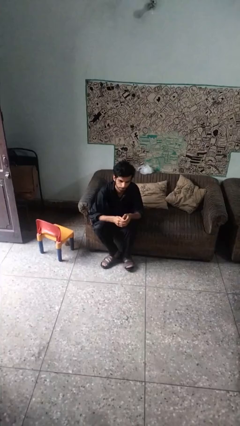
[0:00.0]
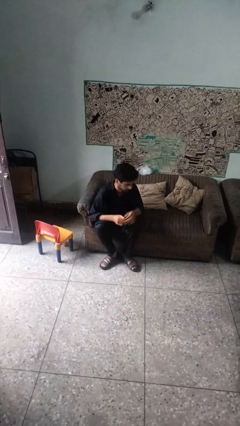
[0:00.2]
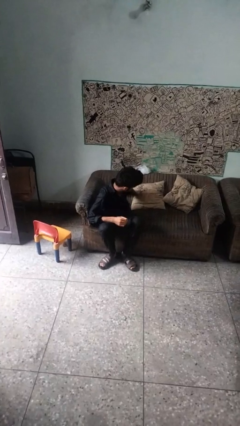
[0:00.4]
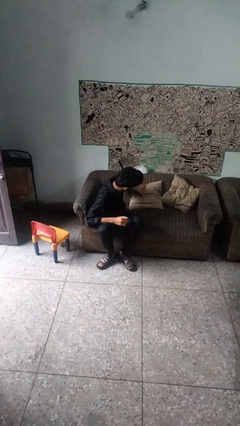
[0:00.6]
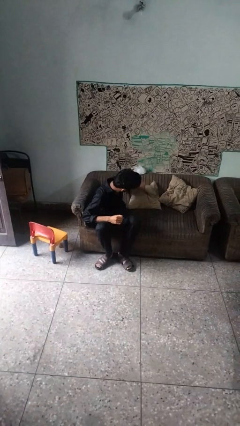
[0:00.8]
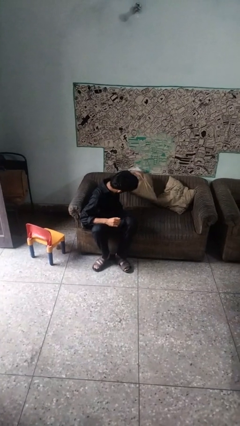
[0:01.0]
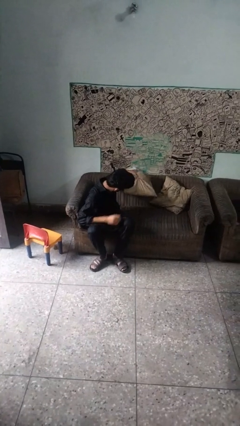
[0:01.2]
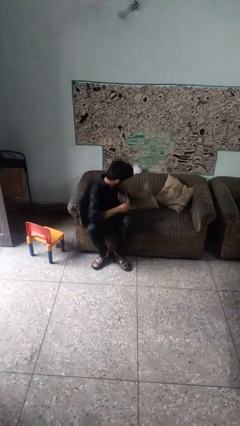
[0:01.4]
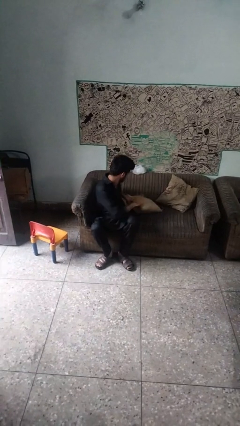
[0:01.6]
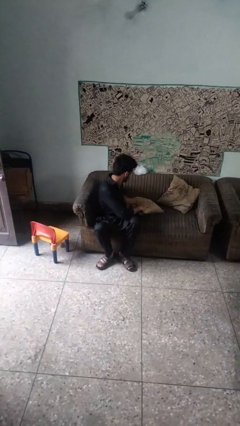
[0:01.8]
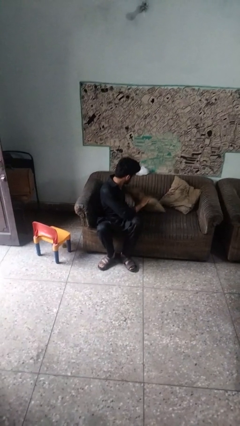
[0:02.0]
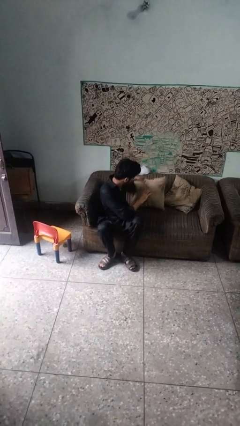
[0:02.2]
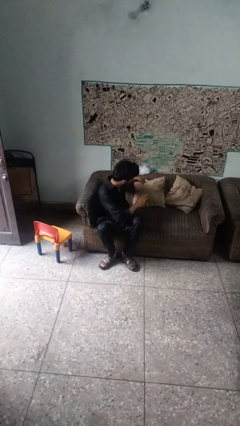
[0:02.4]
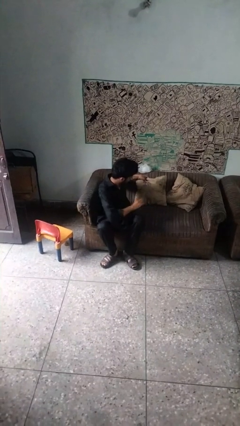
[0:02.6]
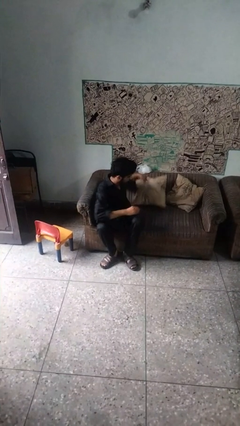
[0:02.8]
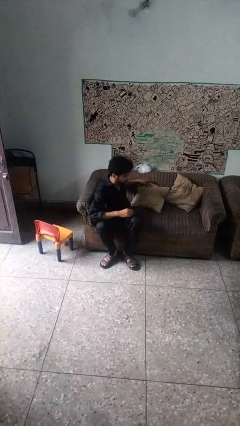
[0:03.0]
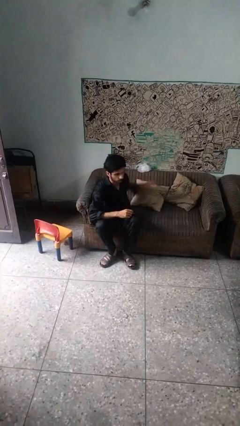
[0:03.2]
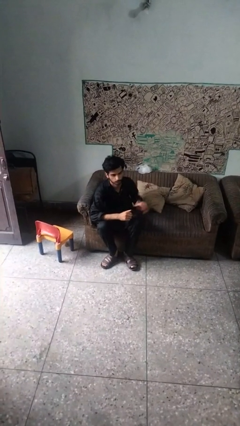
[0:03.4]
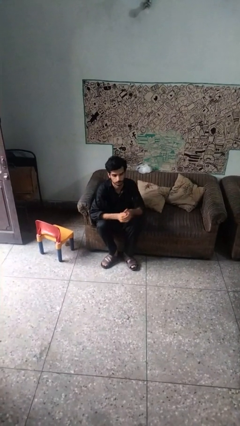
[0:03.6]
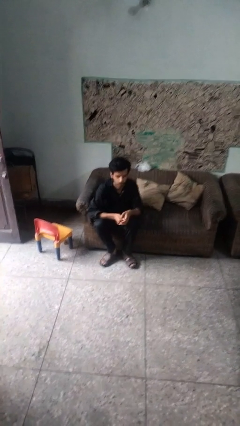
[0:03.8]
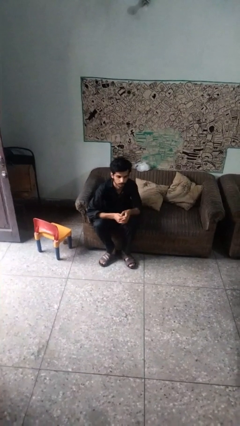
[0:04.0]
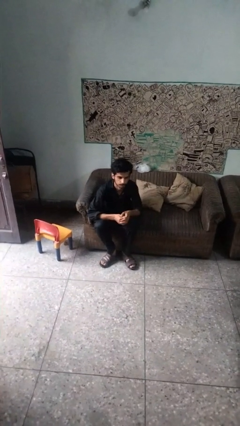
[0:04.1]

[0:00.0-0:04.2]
person searches in couch

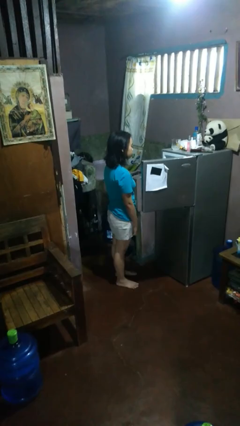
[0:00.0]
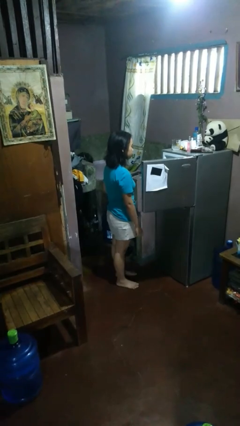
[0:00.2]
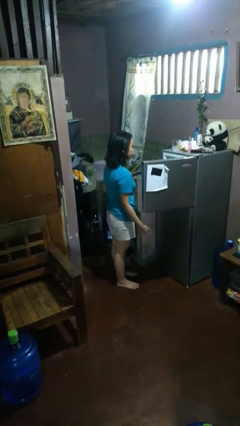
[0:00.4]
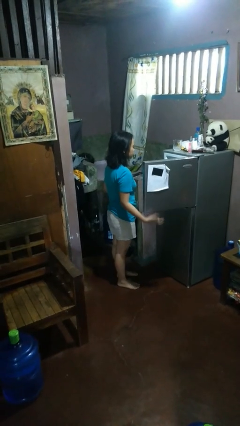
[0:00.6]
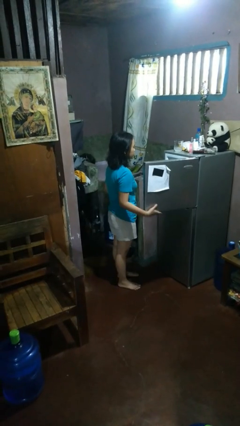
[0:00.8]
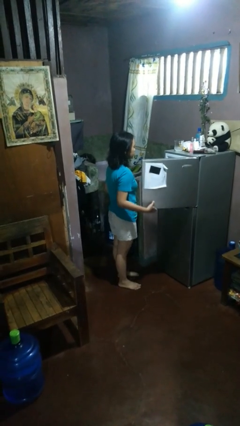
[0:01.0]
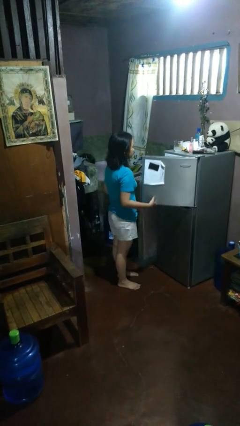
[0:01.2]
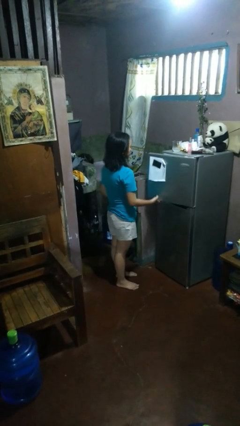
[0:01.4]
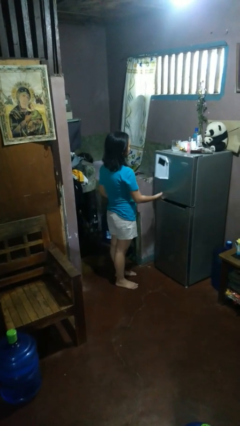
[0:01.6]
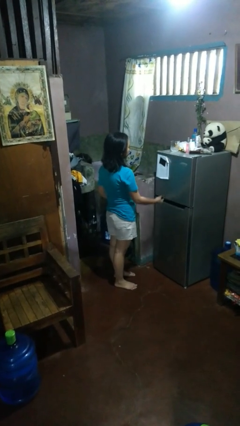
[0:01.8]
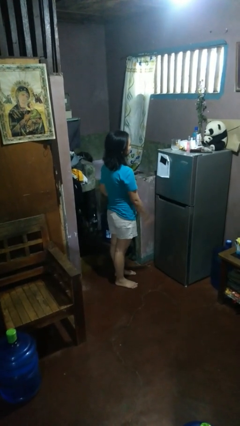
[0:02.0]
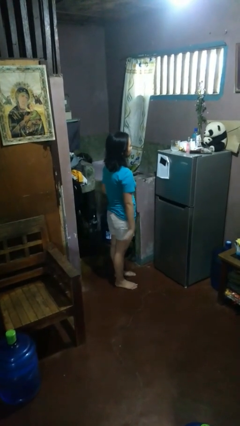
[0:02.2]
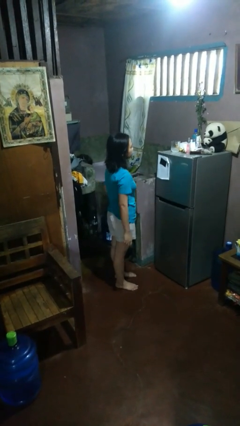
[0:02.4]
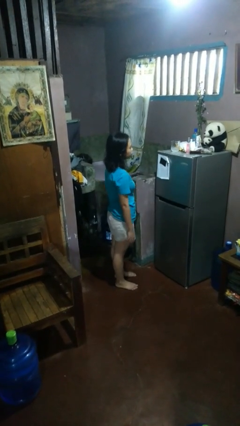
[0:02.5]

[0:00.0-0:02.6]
person closes refrigerator

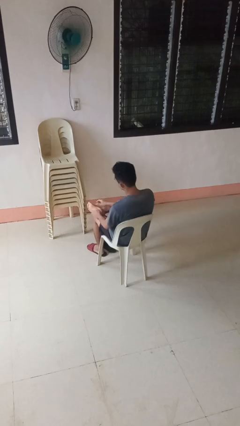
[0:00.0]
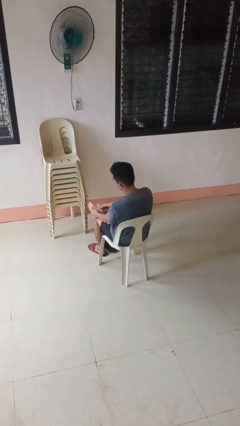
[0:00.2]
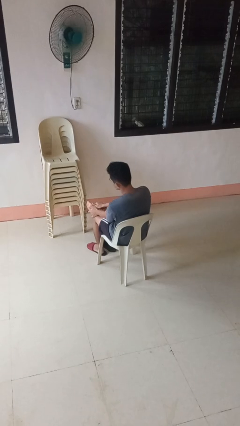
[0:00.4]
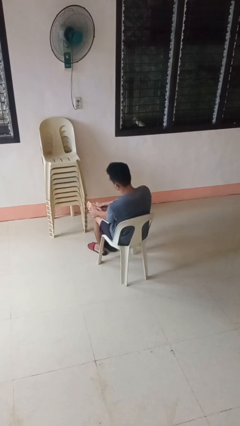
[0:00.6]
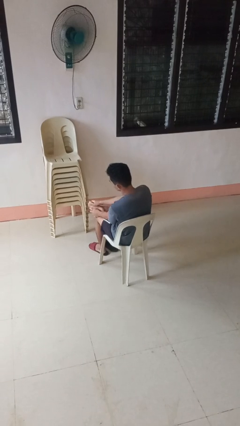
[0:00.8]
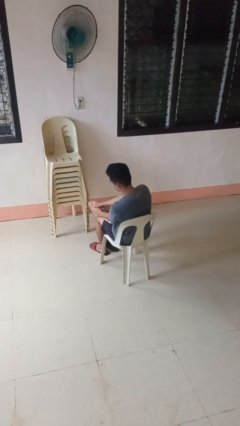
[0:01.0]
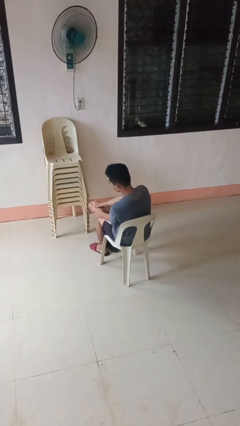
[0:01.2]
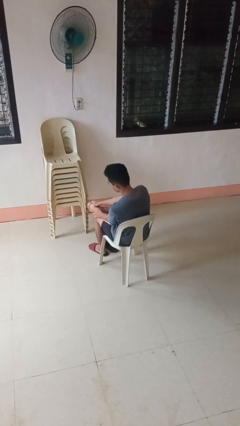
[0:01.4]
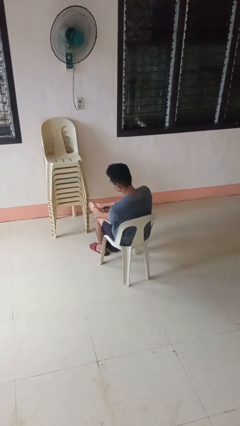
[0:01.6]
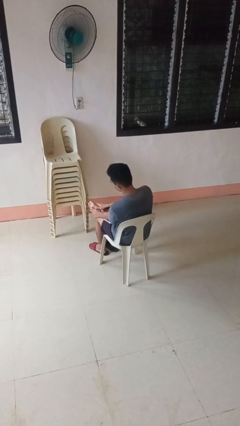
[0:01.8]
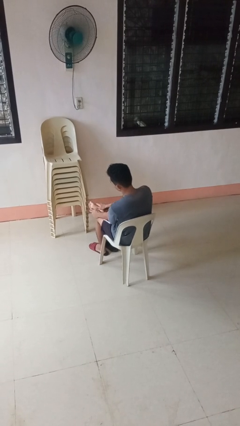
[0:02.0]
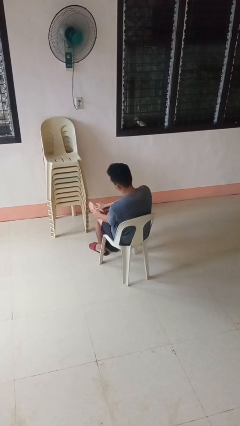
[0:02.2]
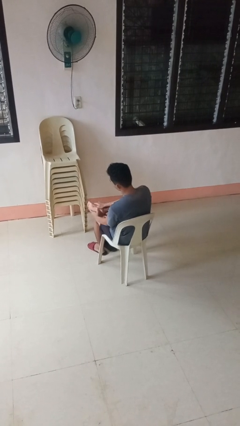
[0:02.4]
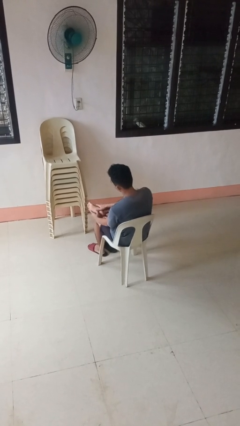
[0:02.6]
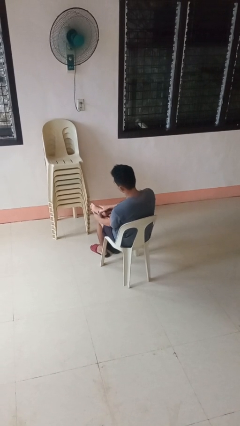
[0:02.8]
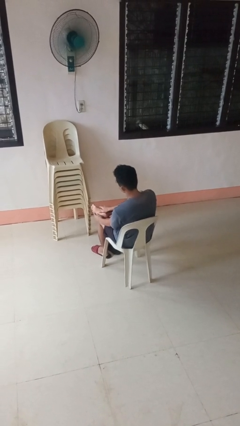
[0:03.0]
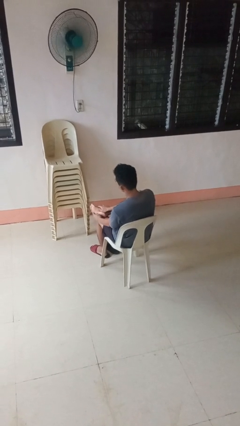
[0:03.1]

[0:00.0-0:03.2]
person rubs foot

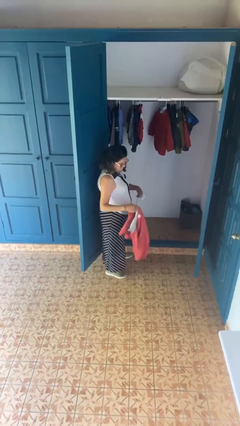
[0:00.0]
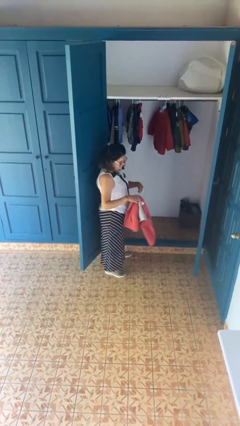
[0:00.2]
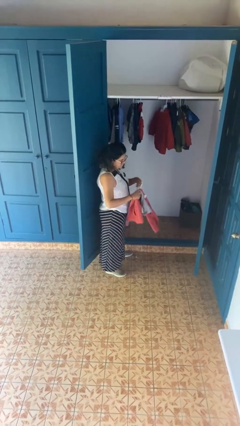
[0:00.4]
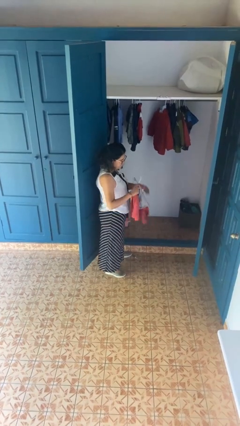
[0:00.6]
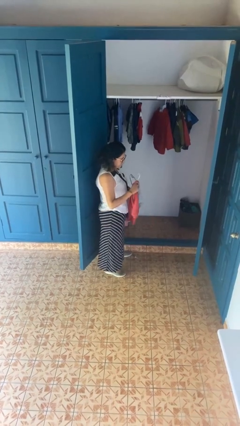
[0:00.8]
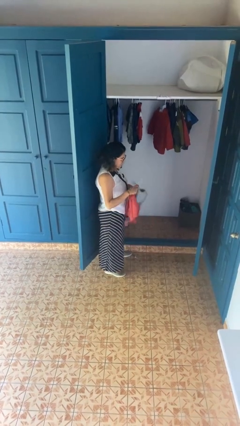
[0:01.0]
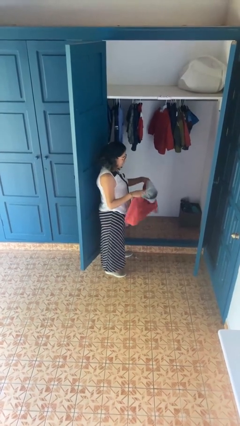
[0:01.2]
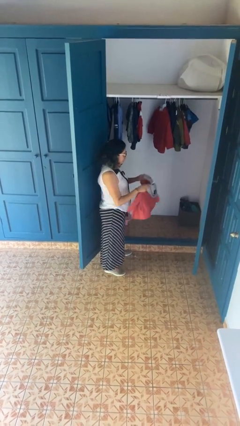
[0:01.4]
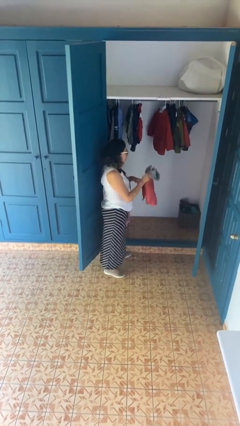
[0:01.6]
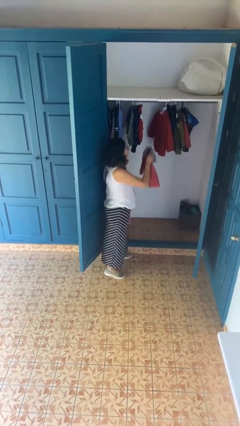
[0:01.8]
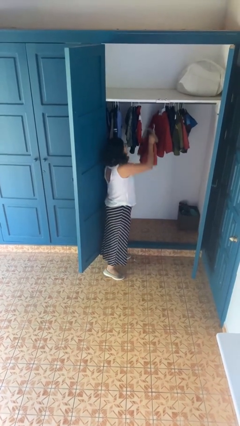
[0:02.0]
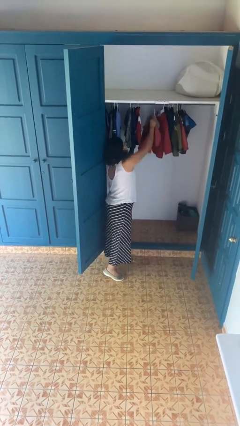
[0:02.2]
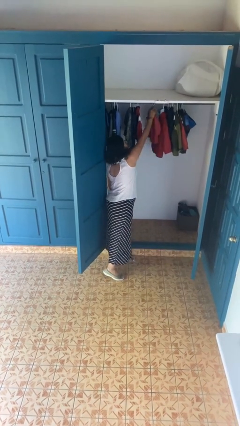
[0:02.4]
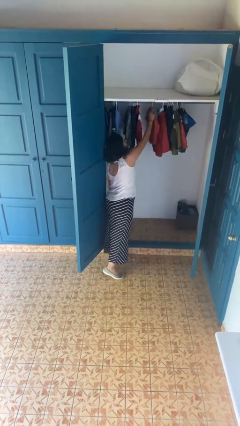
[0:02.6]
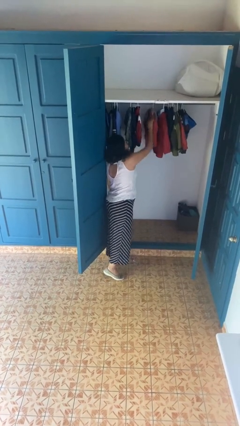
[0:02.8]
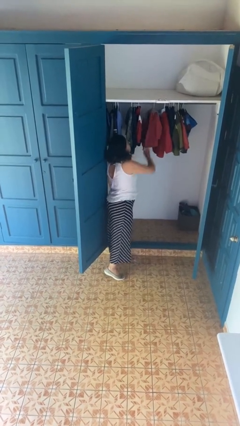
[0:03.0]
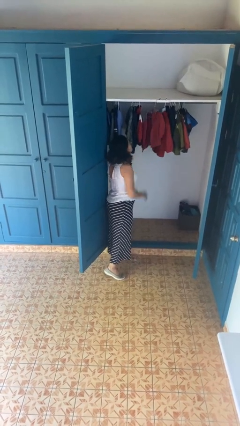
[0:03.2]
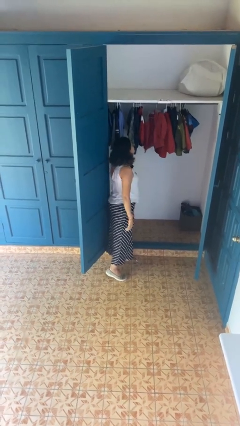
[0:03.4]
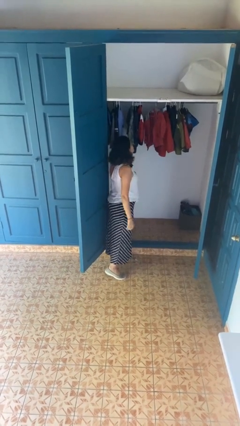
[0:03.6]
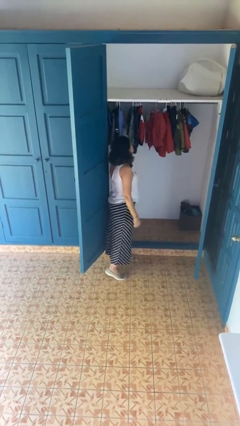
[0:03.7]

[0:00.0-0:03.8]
person puts clothes into closet

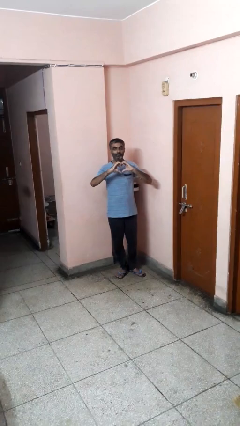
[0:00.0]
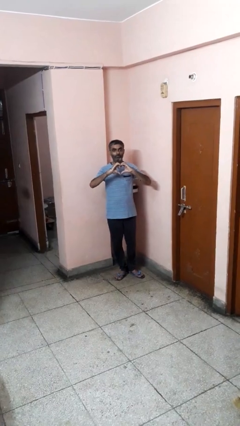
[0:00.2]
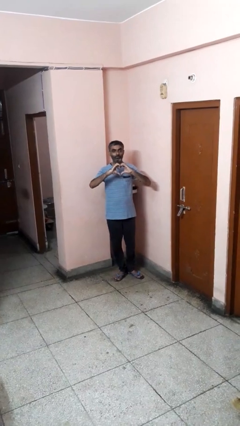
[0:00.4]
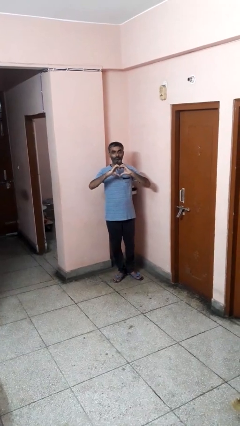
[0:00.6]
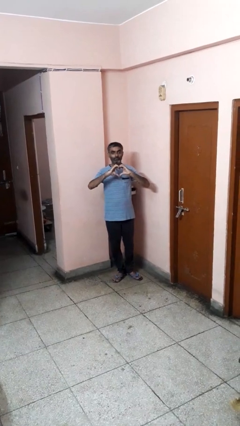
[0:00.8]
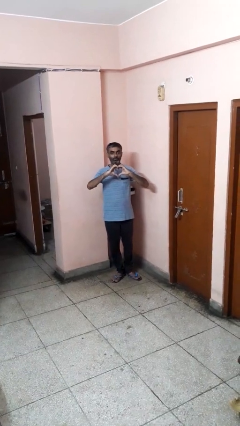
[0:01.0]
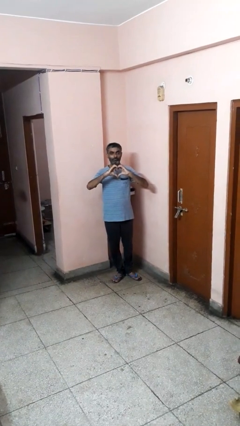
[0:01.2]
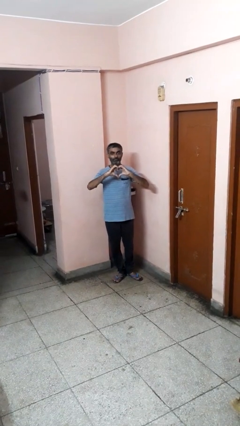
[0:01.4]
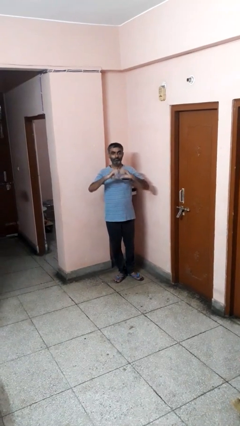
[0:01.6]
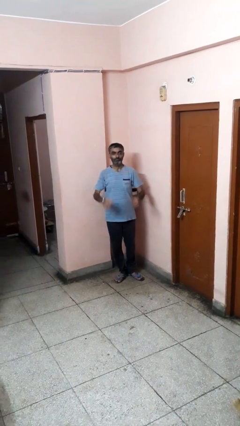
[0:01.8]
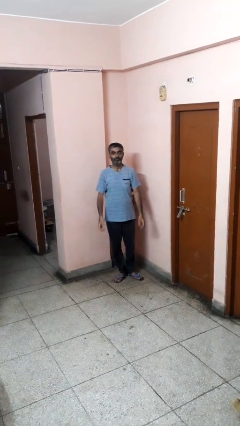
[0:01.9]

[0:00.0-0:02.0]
person gestures heart

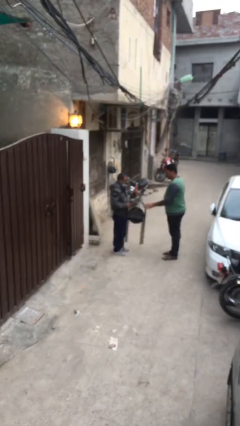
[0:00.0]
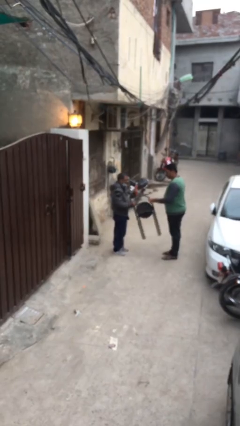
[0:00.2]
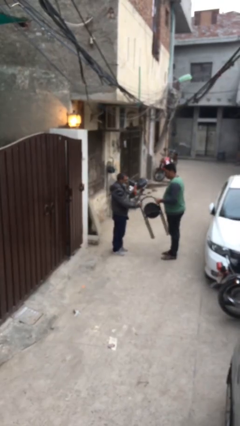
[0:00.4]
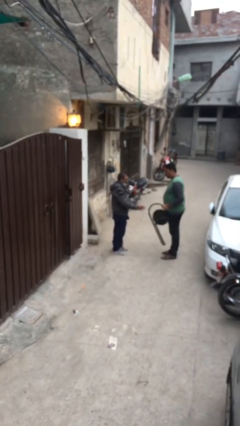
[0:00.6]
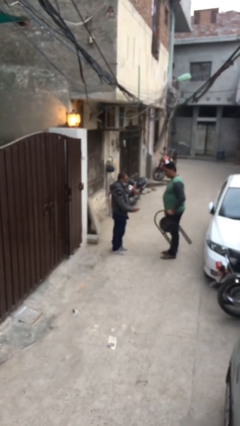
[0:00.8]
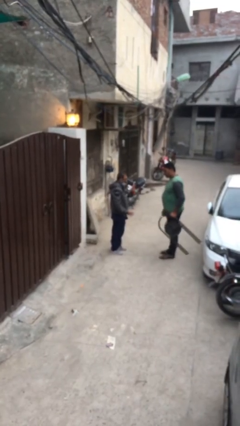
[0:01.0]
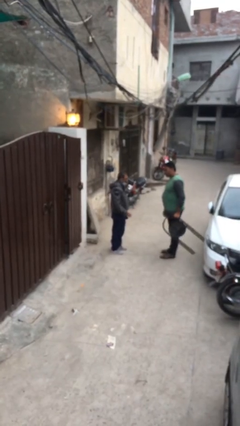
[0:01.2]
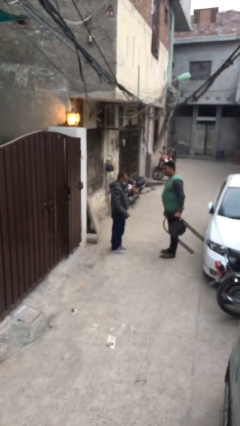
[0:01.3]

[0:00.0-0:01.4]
person transfers object to person

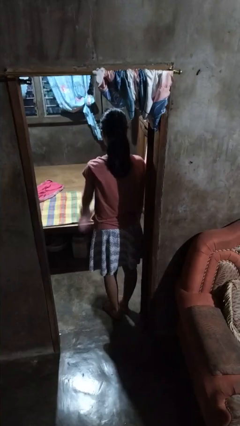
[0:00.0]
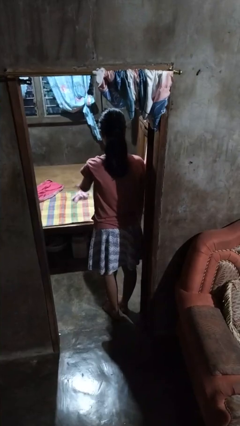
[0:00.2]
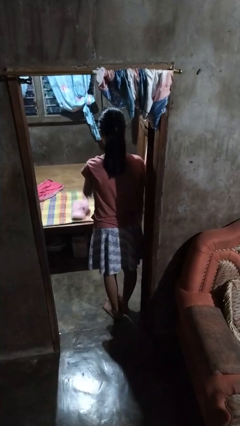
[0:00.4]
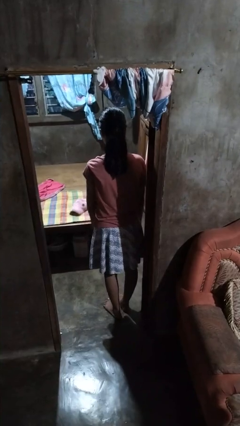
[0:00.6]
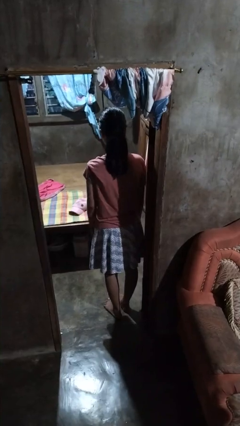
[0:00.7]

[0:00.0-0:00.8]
person throws object on bed
